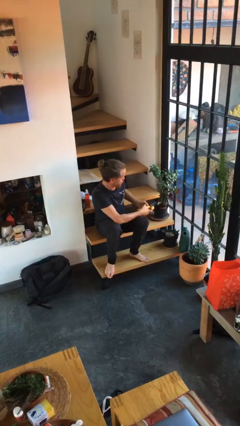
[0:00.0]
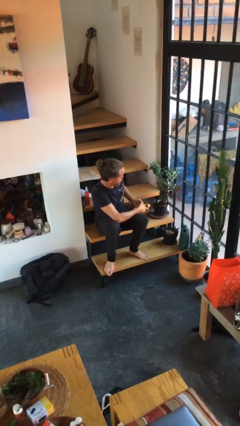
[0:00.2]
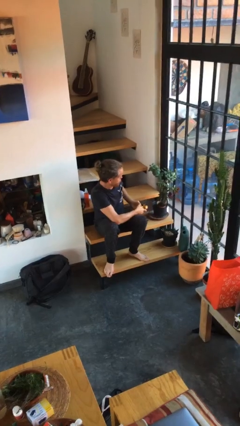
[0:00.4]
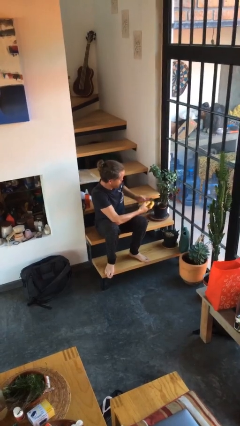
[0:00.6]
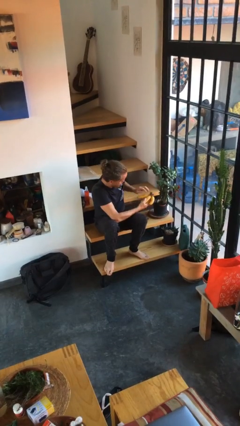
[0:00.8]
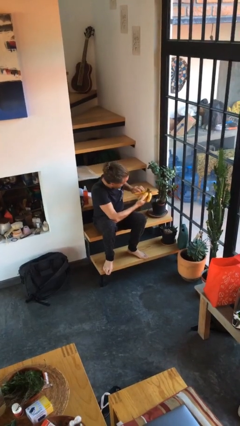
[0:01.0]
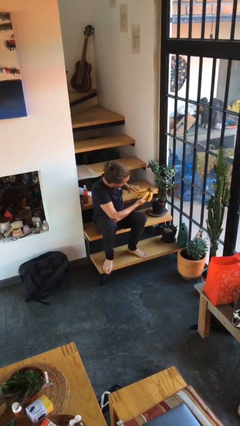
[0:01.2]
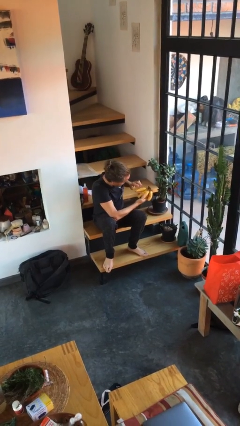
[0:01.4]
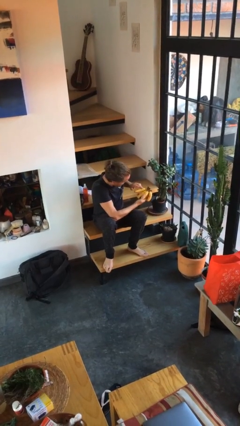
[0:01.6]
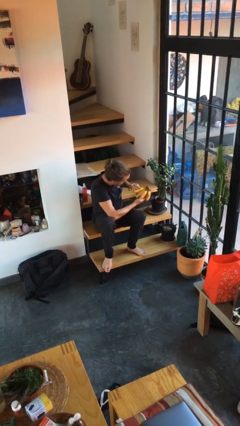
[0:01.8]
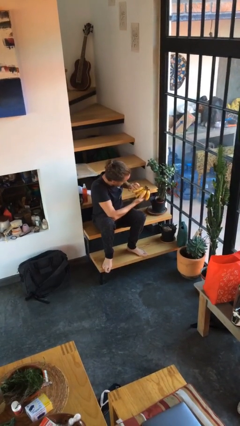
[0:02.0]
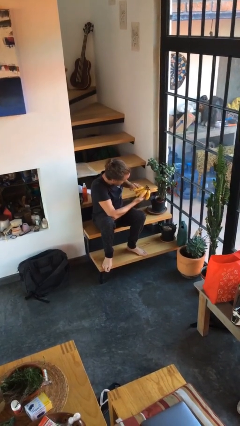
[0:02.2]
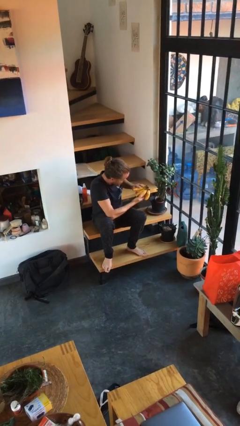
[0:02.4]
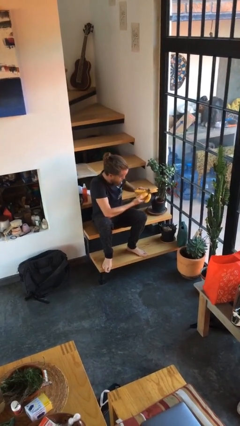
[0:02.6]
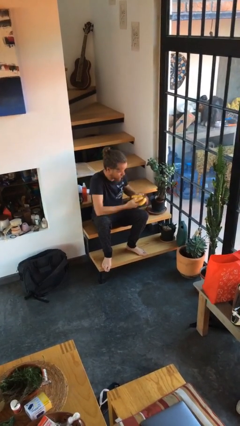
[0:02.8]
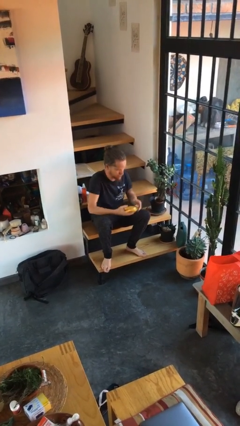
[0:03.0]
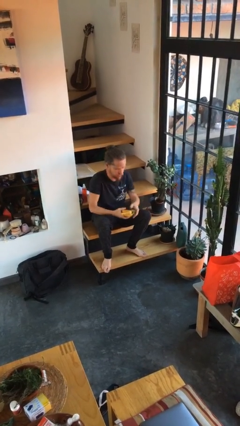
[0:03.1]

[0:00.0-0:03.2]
person taps object with finger

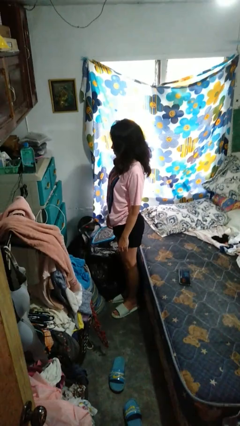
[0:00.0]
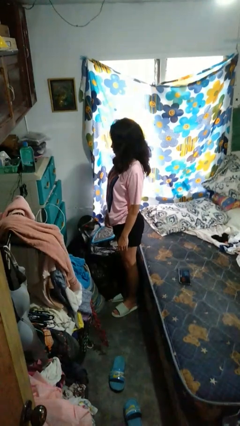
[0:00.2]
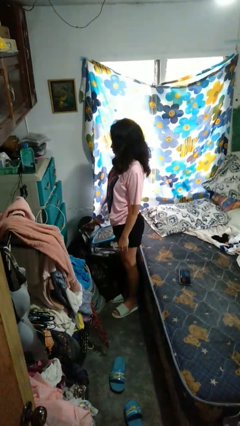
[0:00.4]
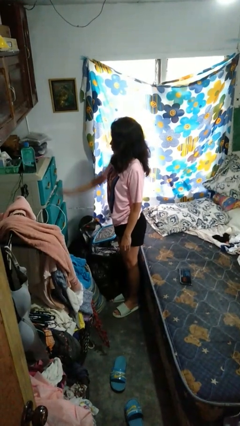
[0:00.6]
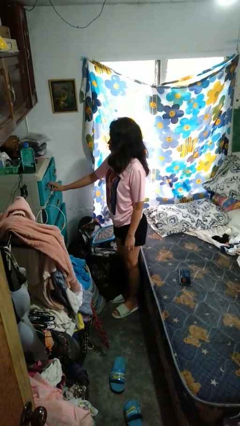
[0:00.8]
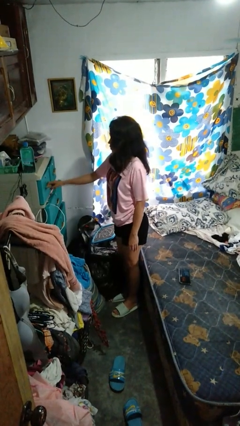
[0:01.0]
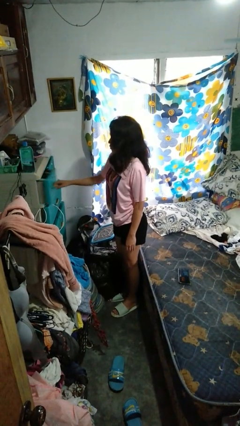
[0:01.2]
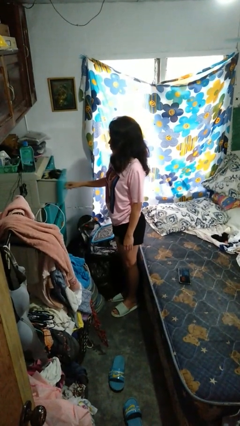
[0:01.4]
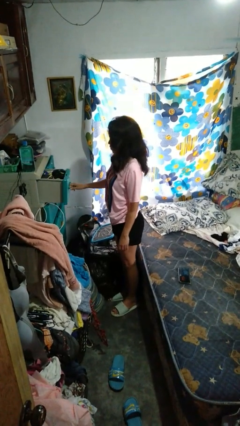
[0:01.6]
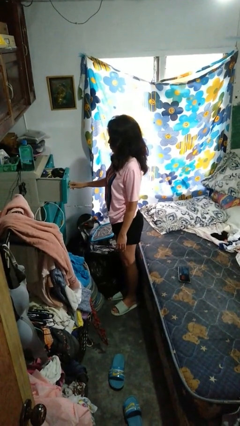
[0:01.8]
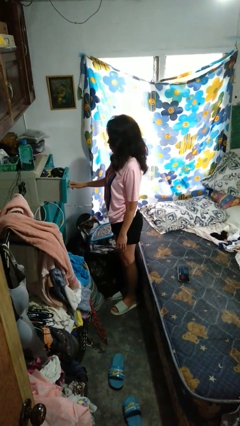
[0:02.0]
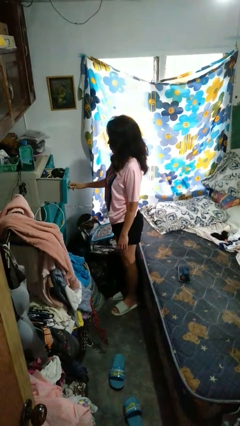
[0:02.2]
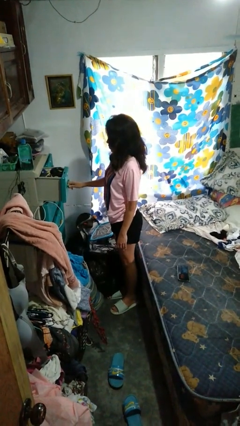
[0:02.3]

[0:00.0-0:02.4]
person opens dresser drawer

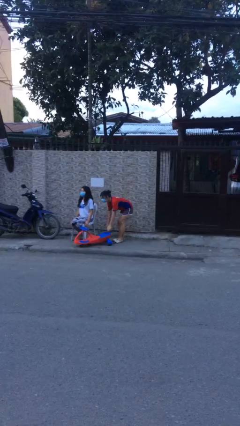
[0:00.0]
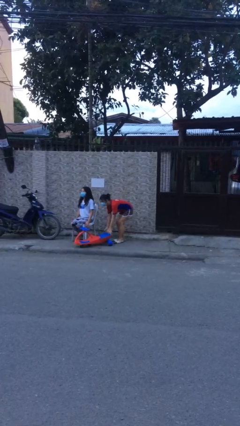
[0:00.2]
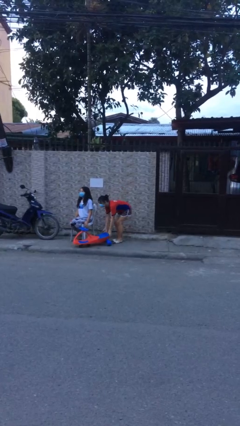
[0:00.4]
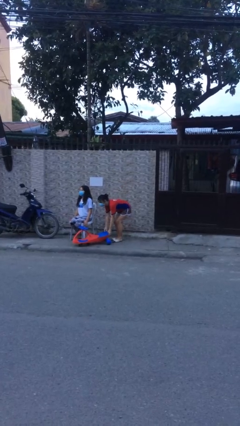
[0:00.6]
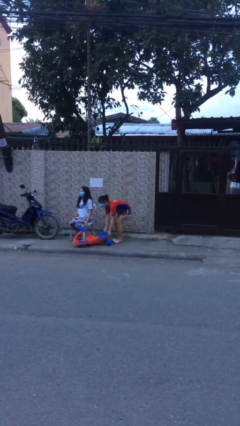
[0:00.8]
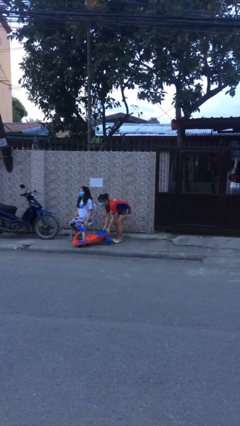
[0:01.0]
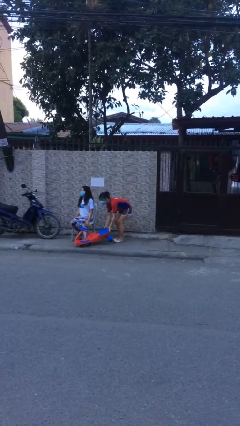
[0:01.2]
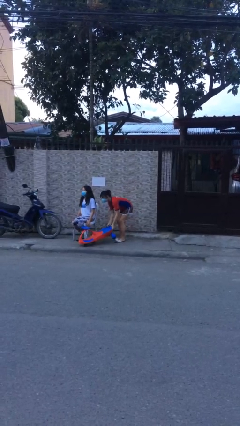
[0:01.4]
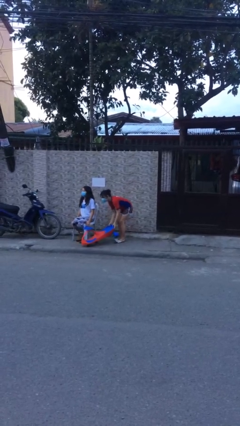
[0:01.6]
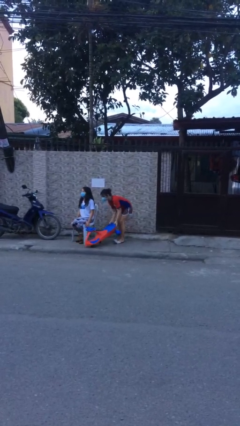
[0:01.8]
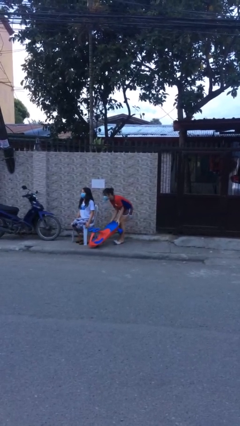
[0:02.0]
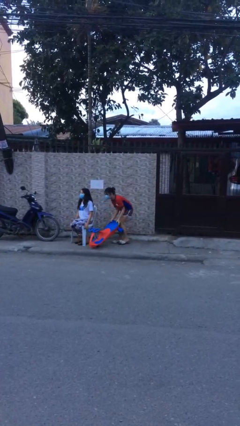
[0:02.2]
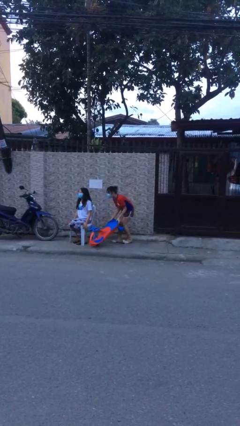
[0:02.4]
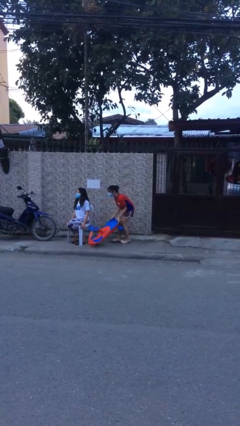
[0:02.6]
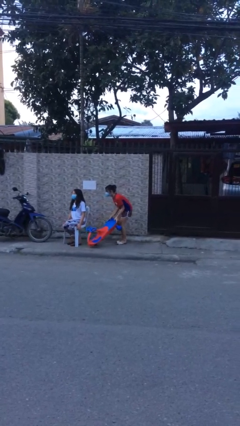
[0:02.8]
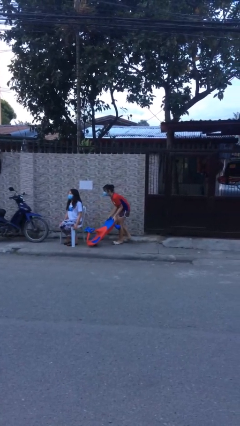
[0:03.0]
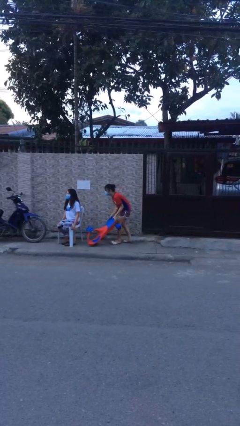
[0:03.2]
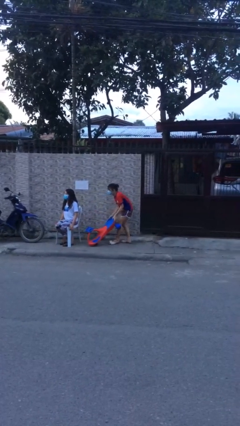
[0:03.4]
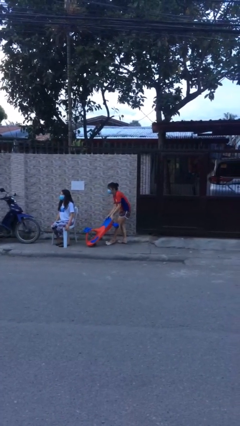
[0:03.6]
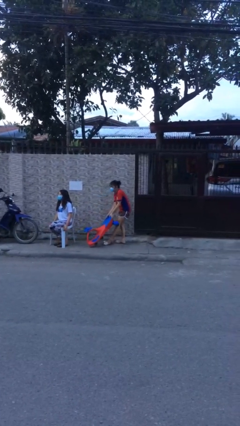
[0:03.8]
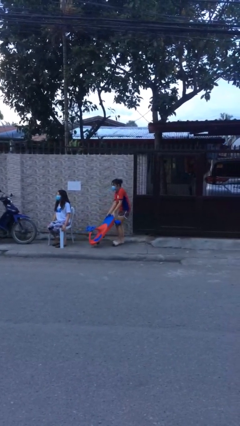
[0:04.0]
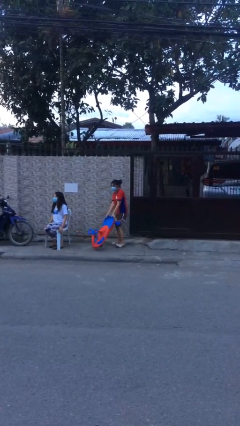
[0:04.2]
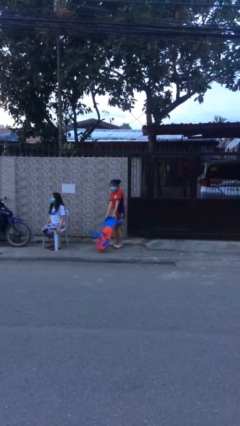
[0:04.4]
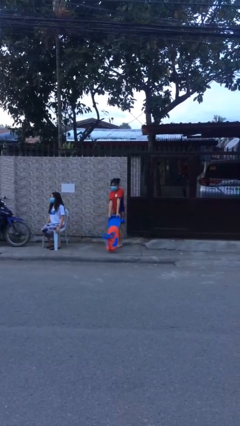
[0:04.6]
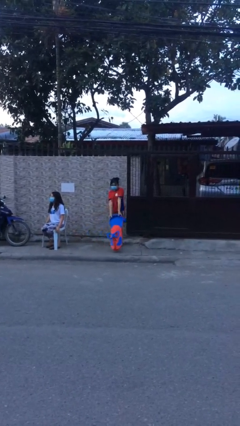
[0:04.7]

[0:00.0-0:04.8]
person steals object from person

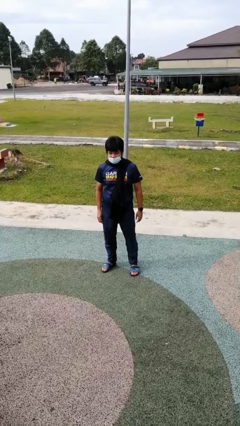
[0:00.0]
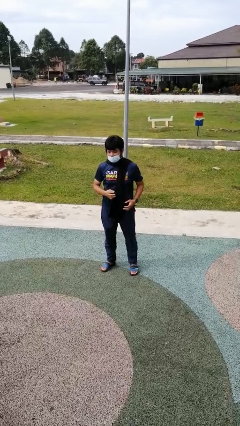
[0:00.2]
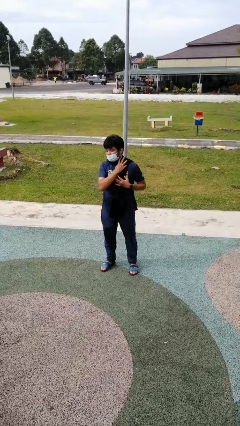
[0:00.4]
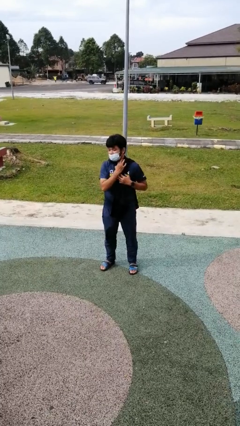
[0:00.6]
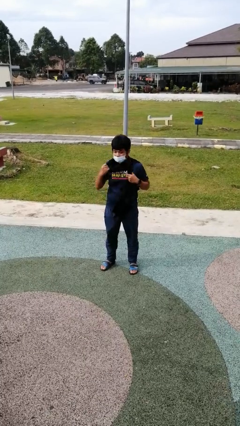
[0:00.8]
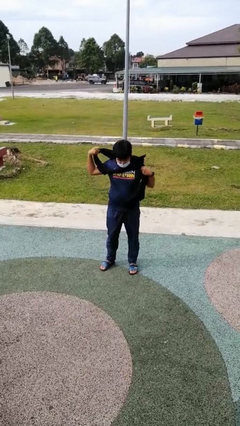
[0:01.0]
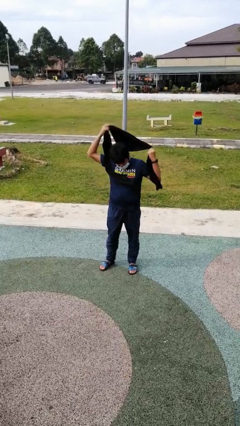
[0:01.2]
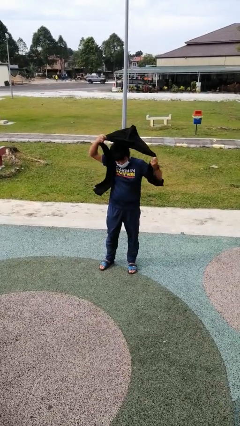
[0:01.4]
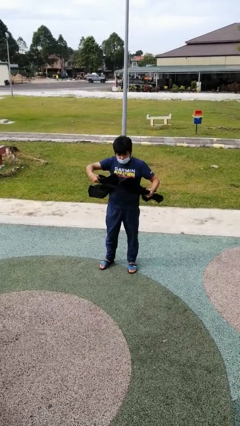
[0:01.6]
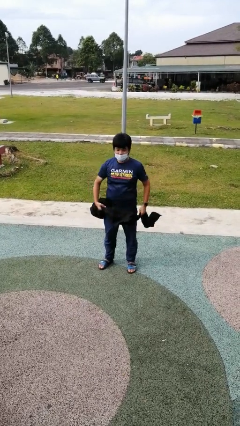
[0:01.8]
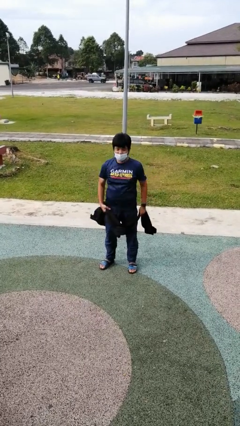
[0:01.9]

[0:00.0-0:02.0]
person takes off scarf

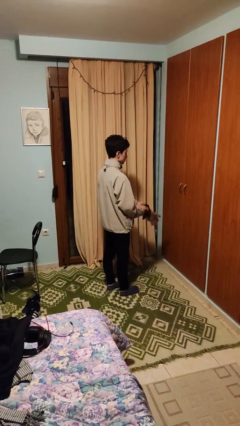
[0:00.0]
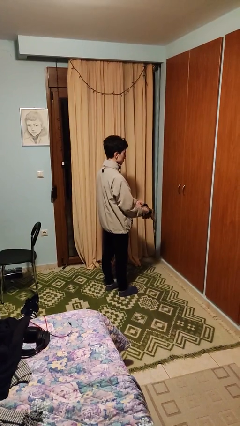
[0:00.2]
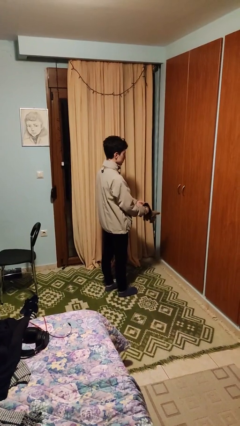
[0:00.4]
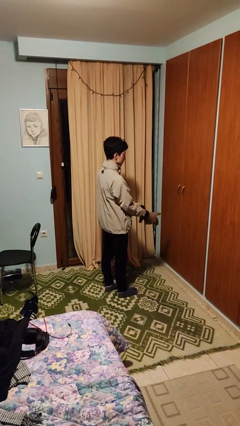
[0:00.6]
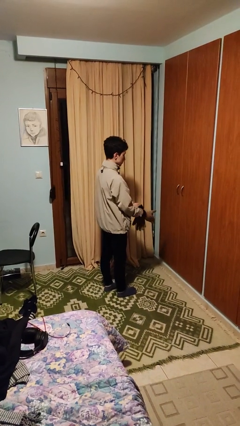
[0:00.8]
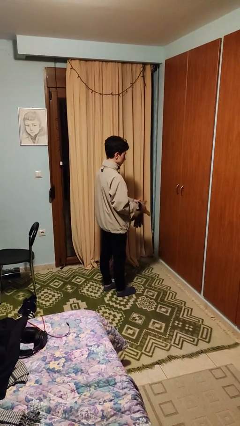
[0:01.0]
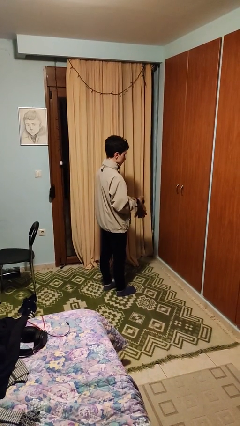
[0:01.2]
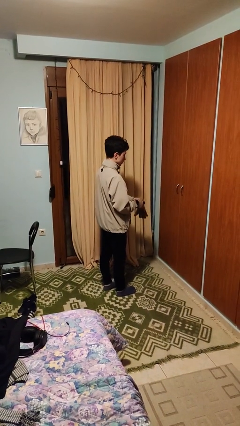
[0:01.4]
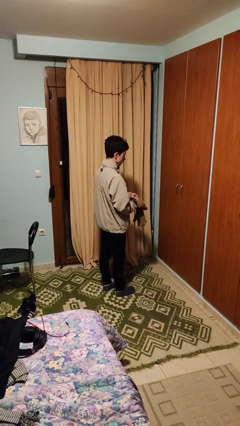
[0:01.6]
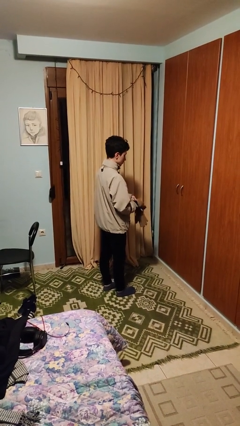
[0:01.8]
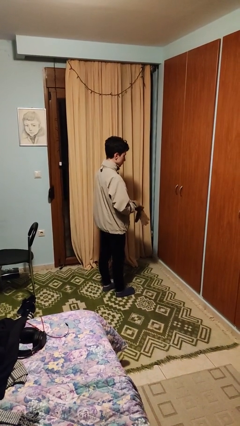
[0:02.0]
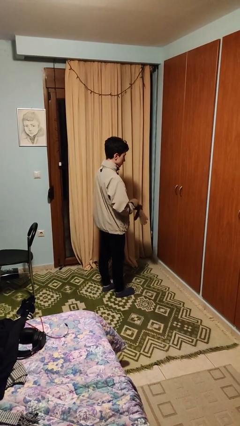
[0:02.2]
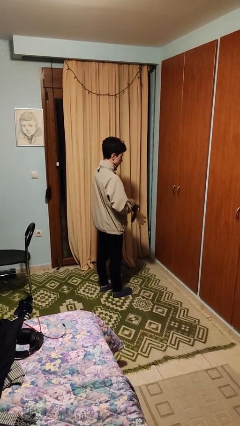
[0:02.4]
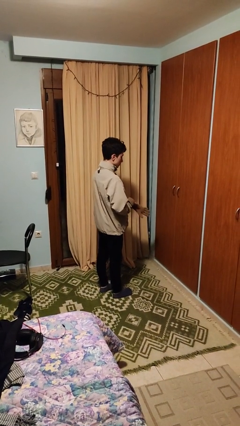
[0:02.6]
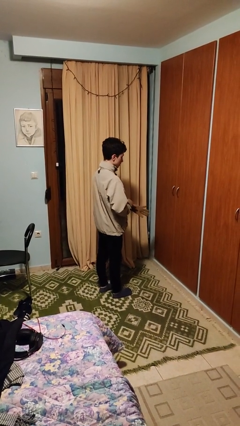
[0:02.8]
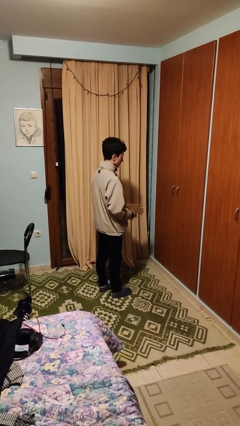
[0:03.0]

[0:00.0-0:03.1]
person puts on gloves

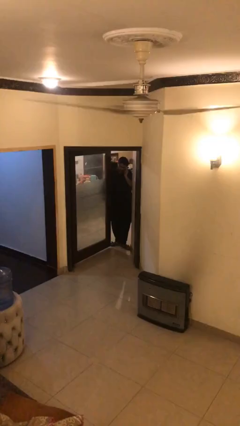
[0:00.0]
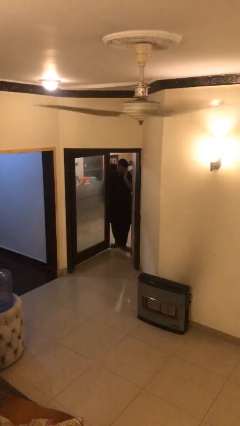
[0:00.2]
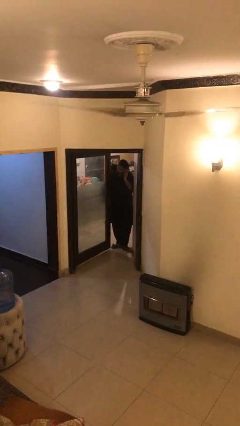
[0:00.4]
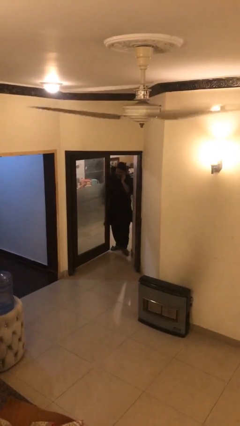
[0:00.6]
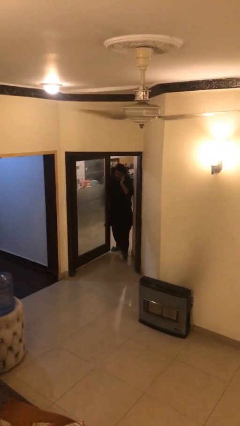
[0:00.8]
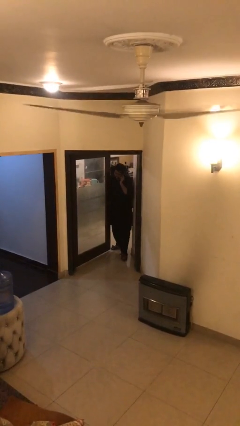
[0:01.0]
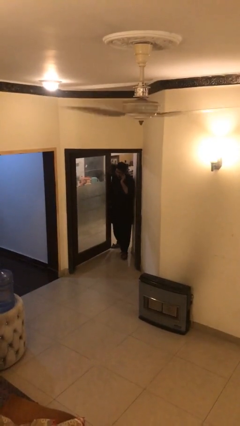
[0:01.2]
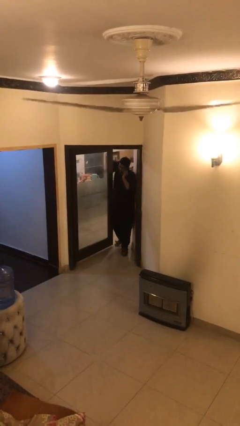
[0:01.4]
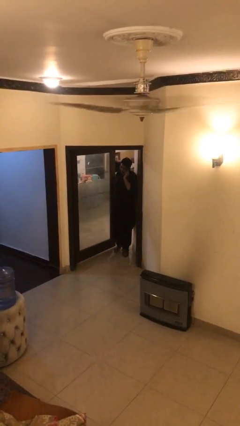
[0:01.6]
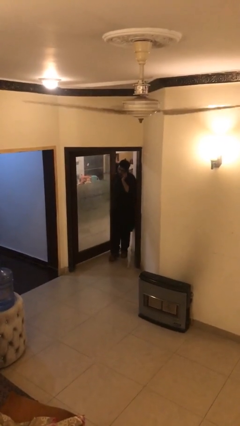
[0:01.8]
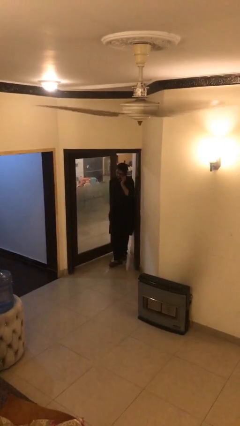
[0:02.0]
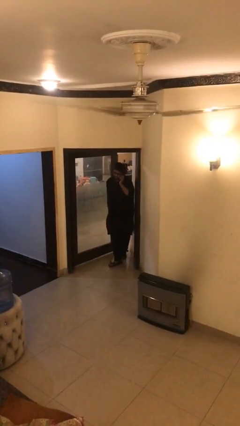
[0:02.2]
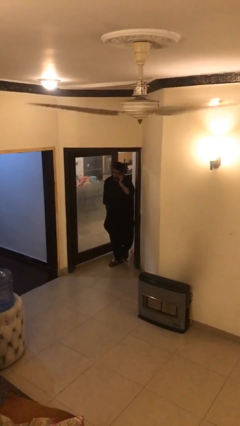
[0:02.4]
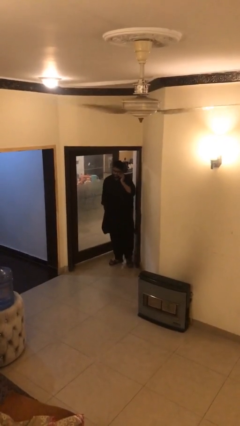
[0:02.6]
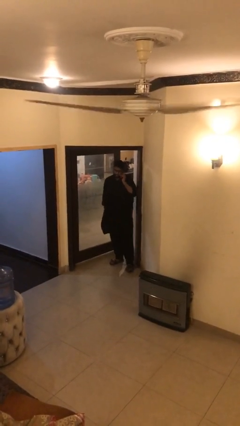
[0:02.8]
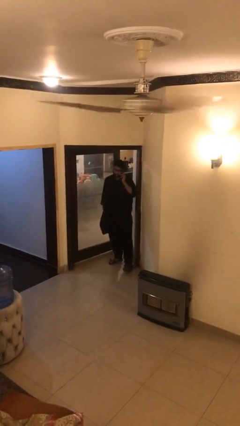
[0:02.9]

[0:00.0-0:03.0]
person enters scene through structure
